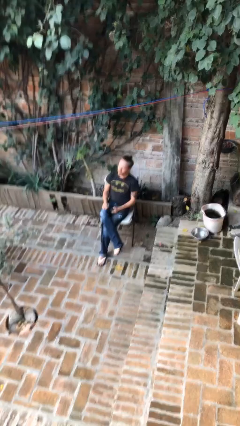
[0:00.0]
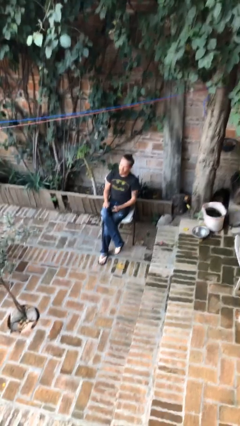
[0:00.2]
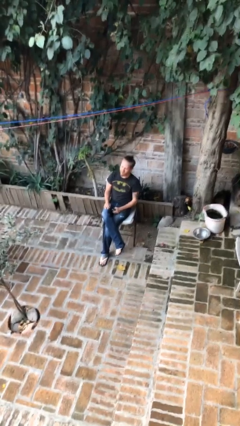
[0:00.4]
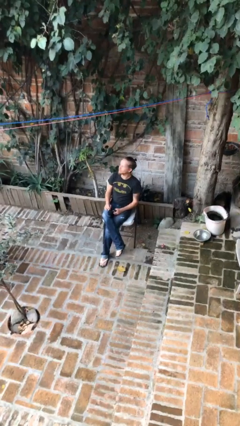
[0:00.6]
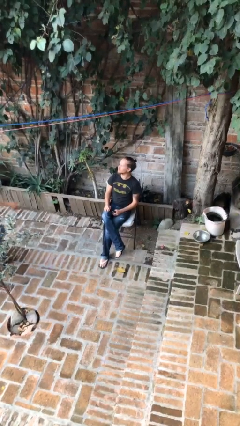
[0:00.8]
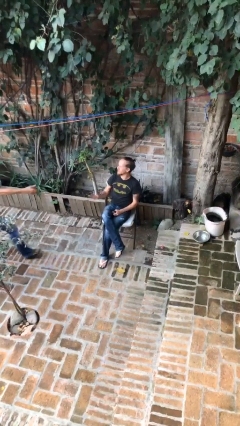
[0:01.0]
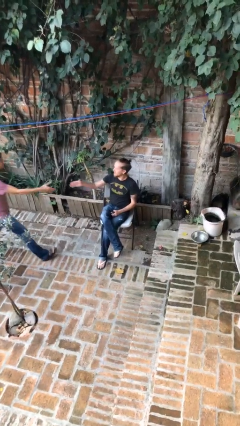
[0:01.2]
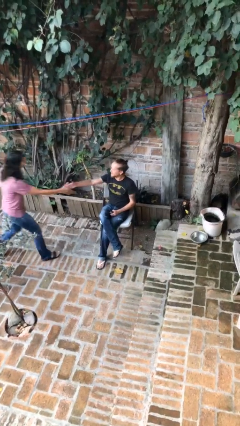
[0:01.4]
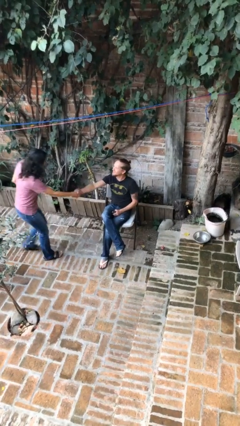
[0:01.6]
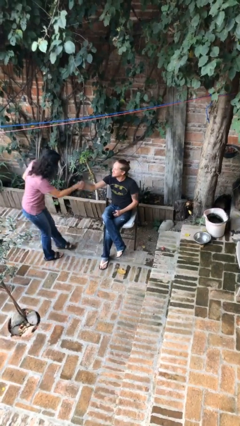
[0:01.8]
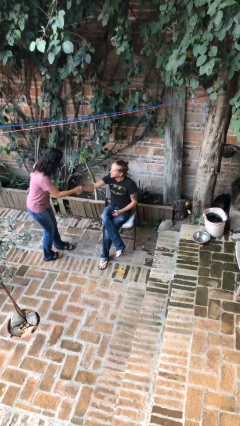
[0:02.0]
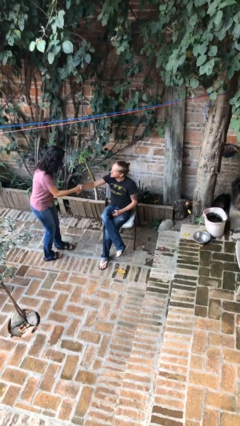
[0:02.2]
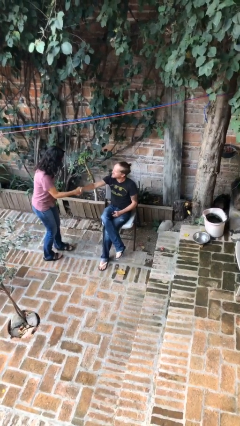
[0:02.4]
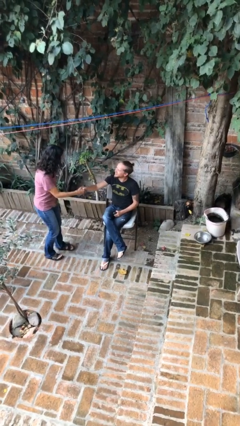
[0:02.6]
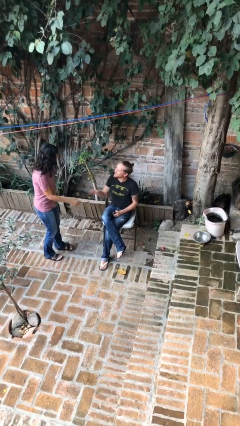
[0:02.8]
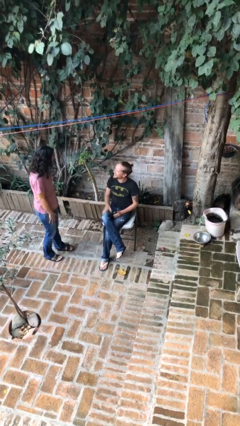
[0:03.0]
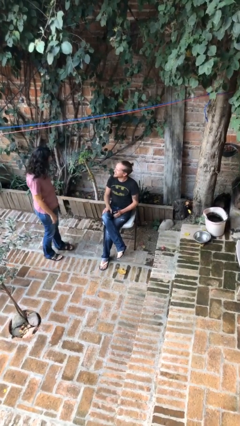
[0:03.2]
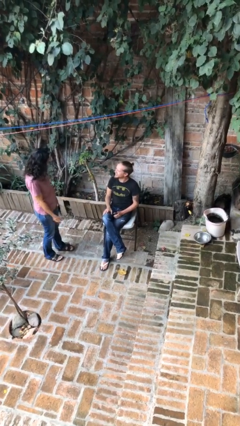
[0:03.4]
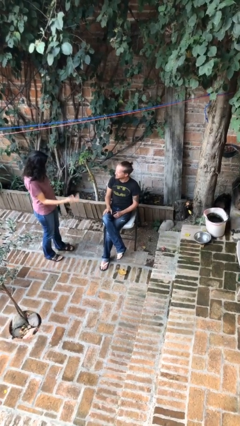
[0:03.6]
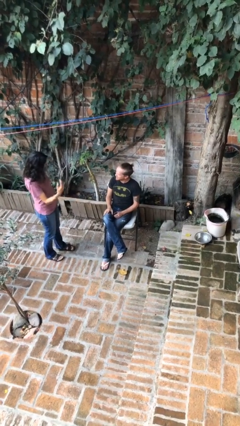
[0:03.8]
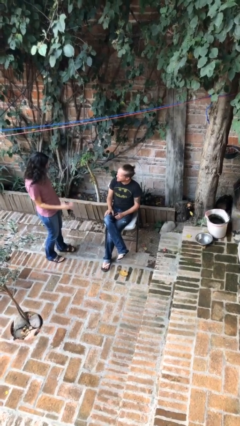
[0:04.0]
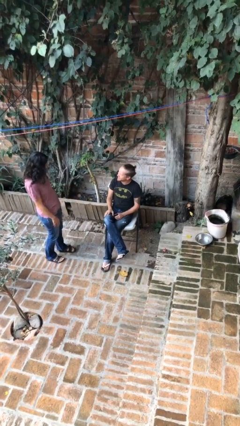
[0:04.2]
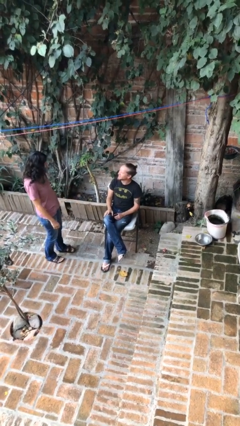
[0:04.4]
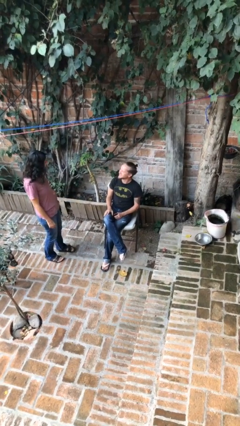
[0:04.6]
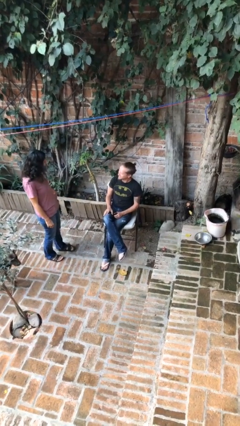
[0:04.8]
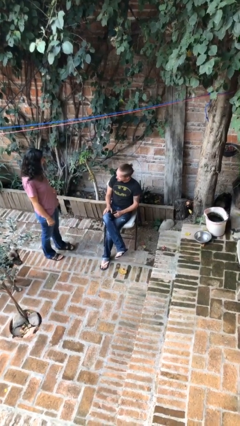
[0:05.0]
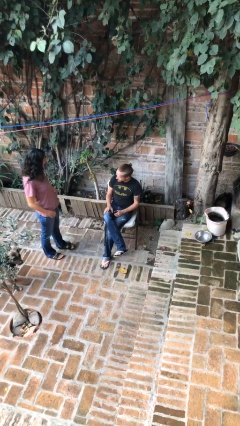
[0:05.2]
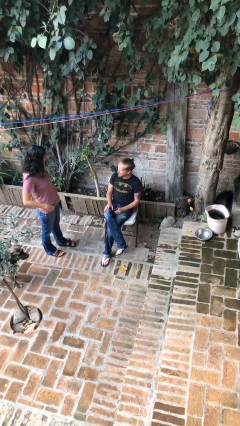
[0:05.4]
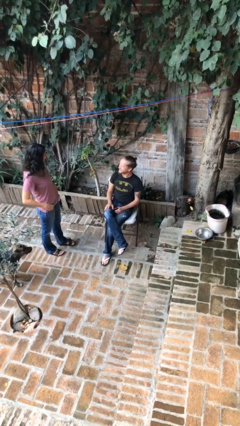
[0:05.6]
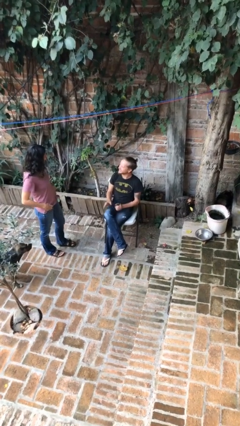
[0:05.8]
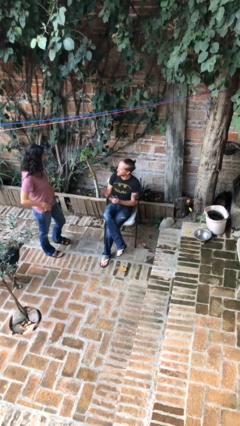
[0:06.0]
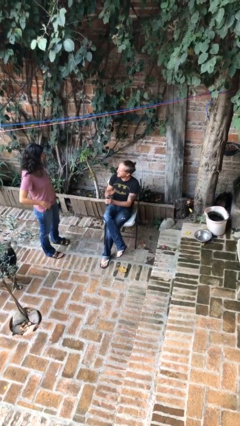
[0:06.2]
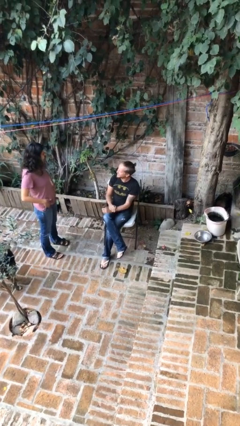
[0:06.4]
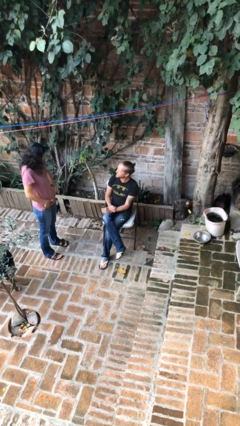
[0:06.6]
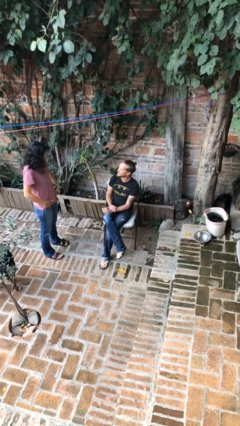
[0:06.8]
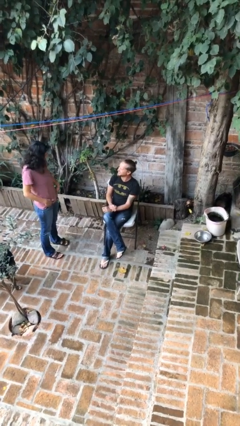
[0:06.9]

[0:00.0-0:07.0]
person shakes hand

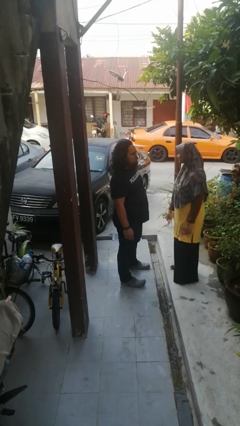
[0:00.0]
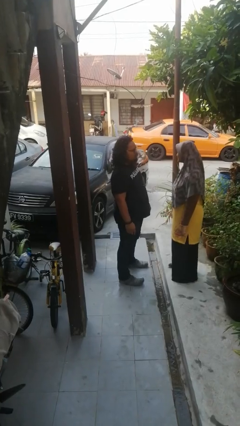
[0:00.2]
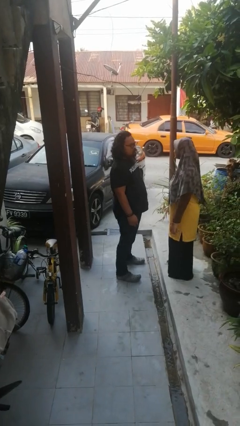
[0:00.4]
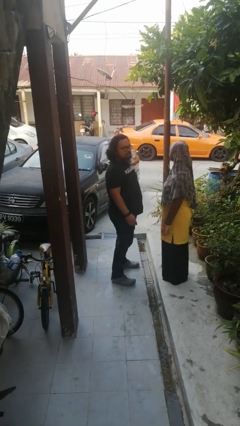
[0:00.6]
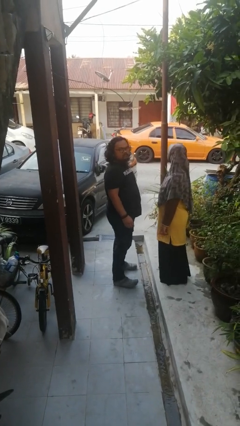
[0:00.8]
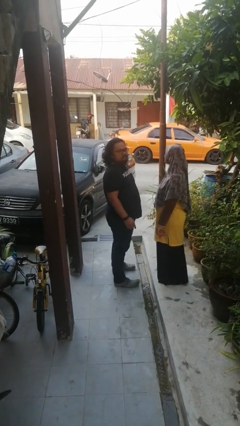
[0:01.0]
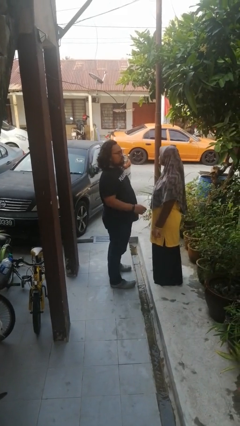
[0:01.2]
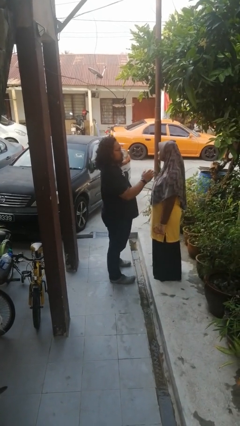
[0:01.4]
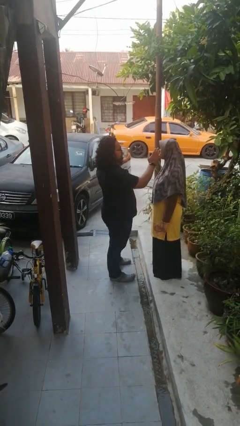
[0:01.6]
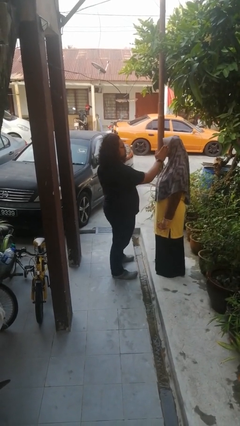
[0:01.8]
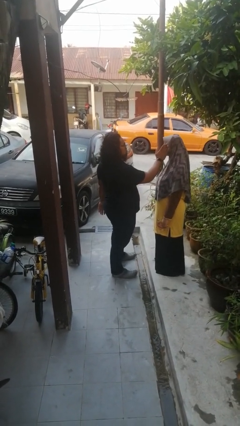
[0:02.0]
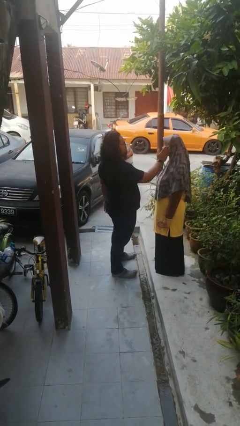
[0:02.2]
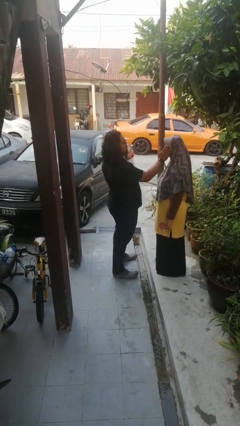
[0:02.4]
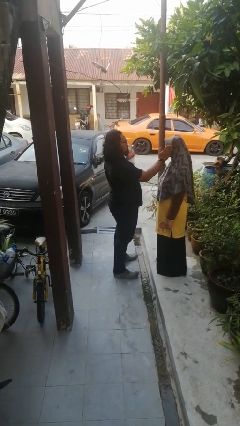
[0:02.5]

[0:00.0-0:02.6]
person touches face of person

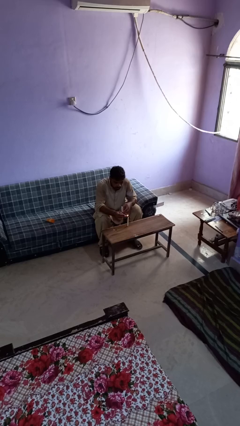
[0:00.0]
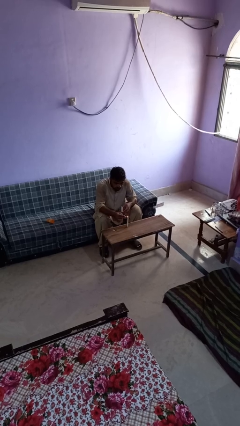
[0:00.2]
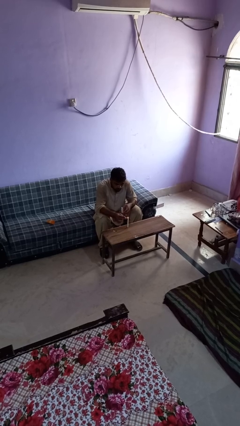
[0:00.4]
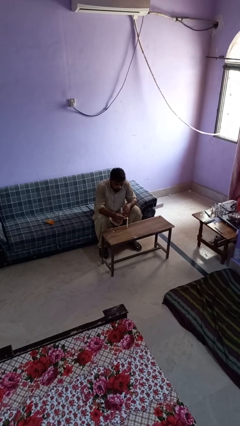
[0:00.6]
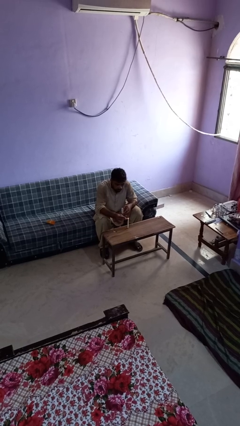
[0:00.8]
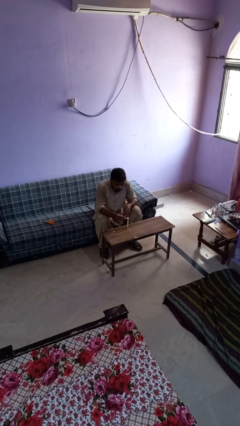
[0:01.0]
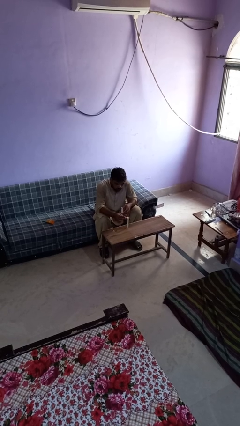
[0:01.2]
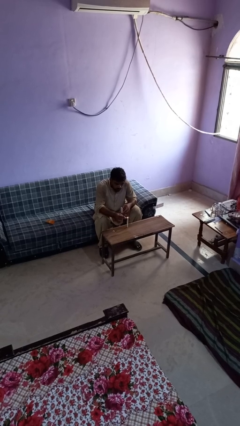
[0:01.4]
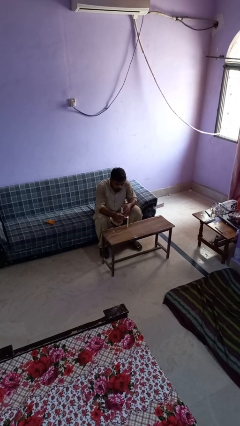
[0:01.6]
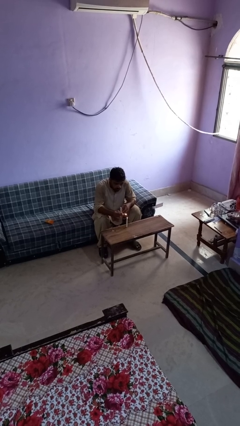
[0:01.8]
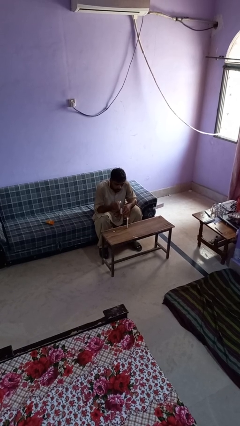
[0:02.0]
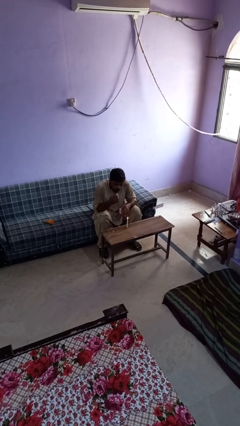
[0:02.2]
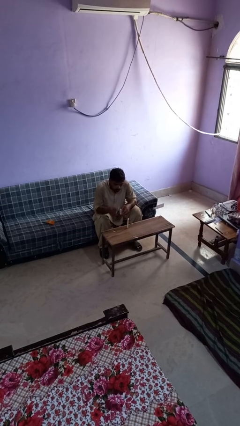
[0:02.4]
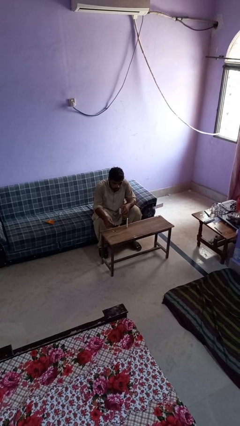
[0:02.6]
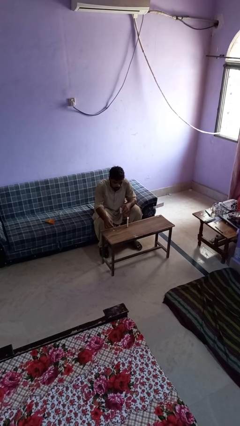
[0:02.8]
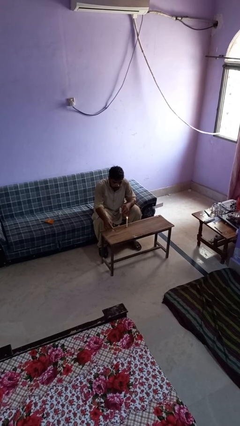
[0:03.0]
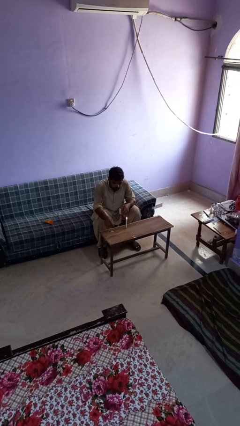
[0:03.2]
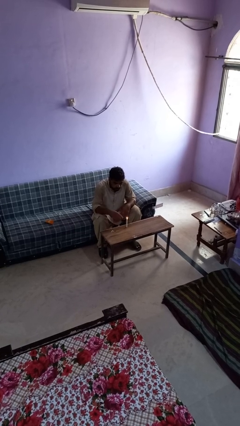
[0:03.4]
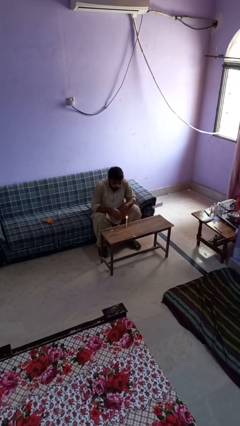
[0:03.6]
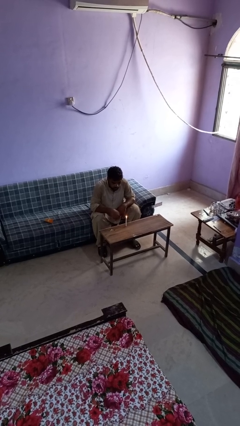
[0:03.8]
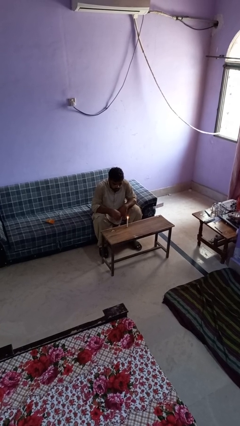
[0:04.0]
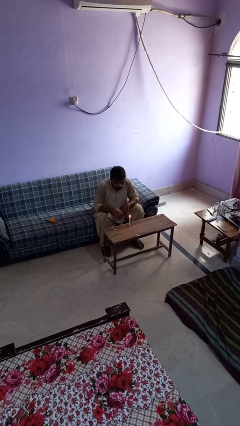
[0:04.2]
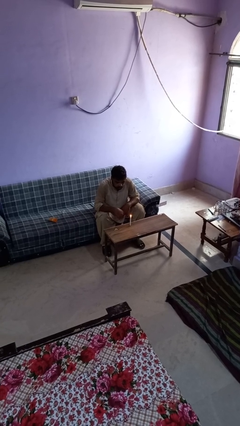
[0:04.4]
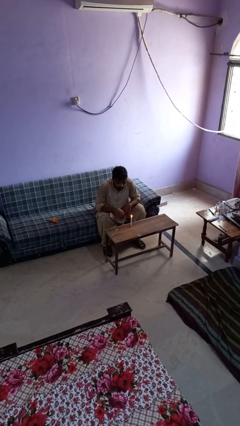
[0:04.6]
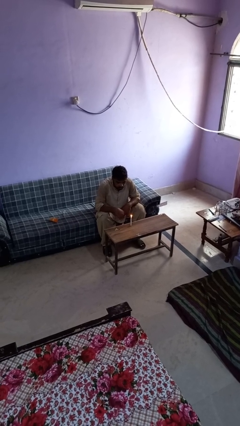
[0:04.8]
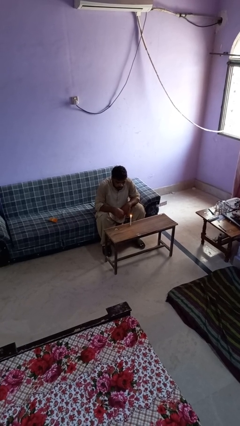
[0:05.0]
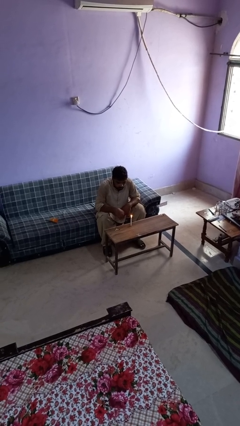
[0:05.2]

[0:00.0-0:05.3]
person lights candle

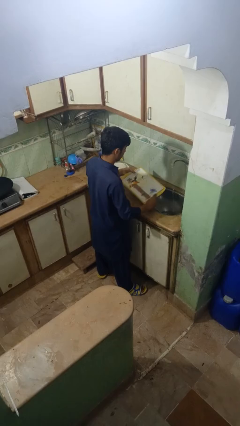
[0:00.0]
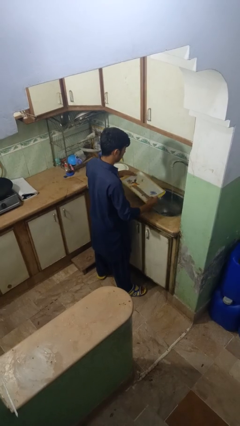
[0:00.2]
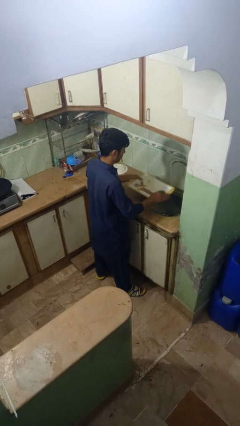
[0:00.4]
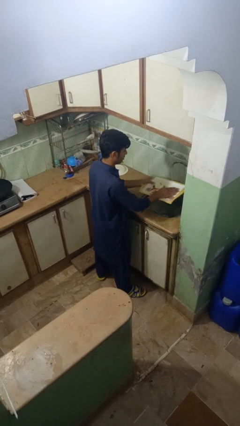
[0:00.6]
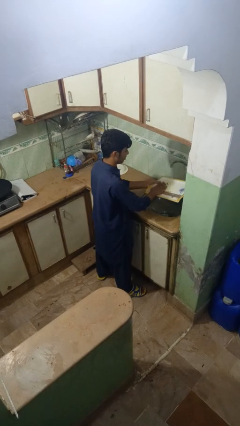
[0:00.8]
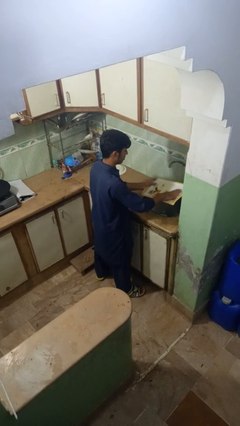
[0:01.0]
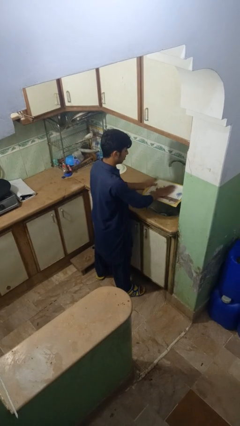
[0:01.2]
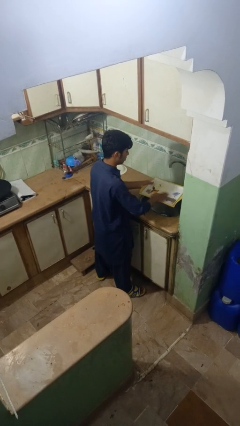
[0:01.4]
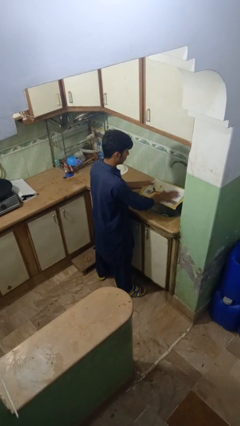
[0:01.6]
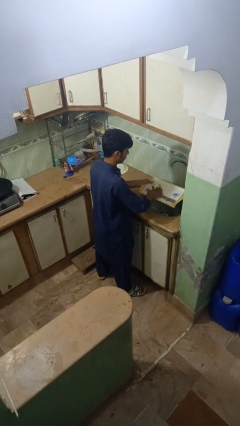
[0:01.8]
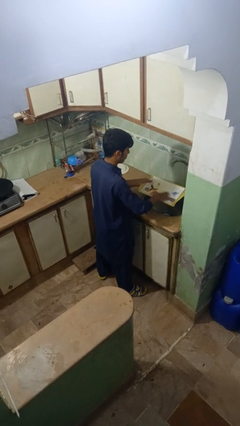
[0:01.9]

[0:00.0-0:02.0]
person washes dish

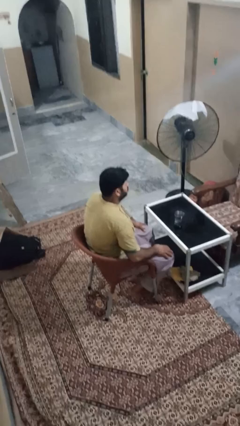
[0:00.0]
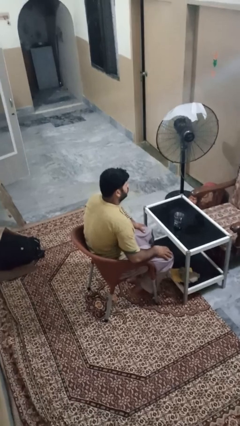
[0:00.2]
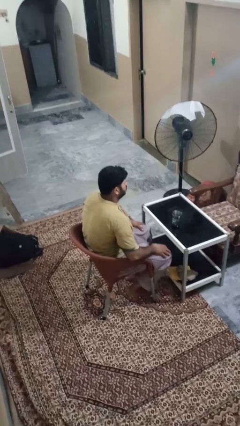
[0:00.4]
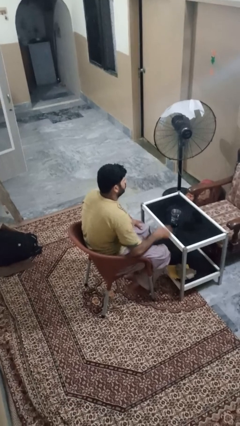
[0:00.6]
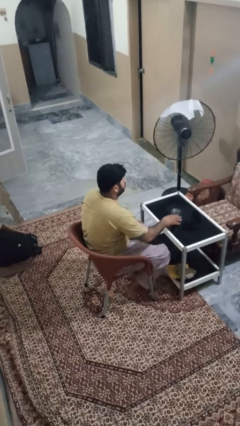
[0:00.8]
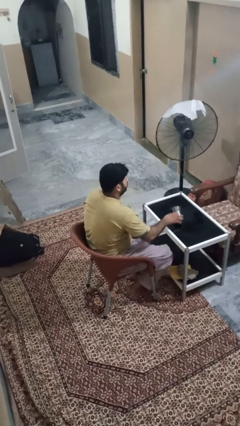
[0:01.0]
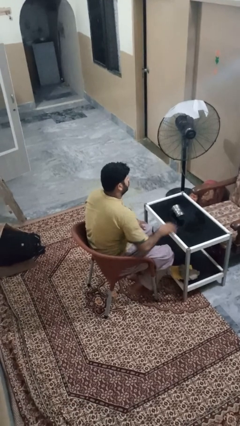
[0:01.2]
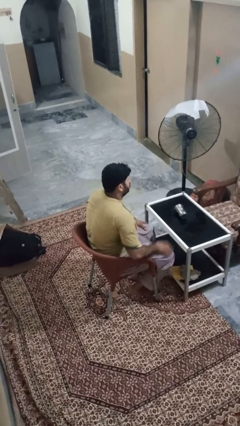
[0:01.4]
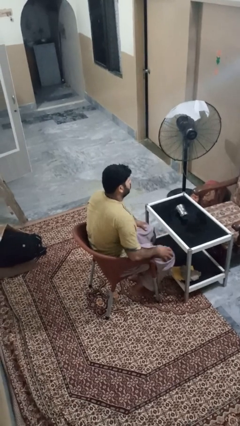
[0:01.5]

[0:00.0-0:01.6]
person knocks over glass
